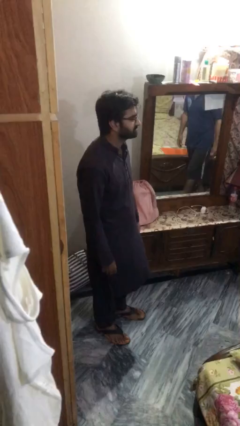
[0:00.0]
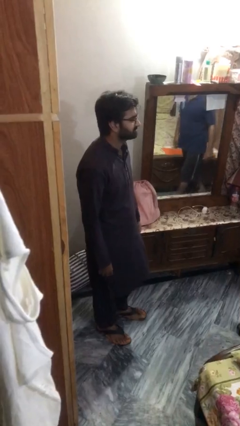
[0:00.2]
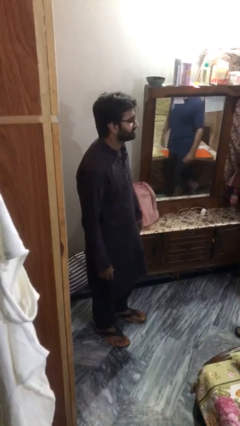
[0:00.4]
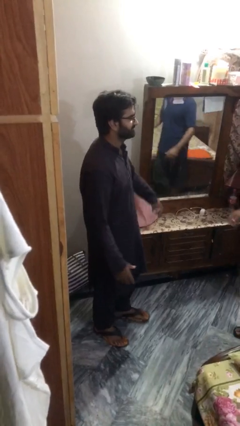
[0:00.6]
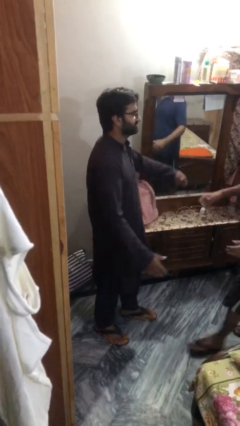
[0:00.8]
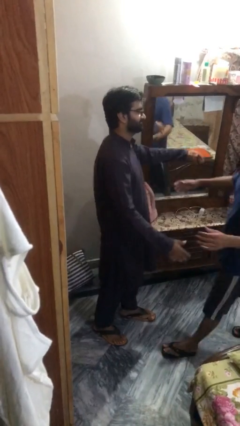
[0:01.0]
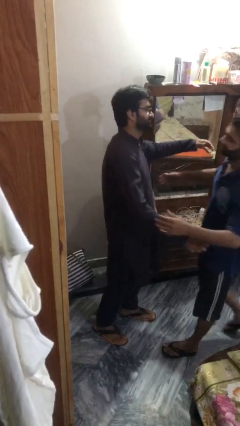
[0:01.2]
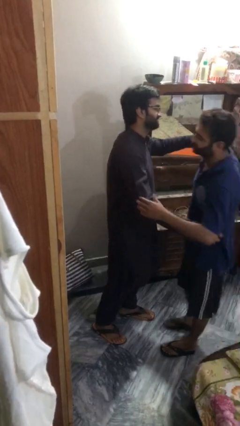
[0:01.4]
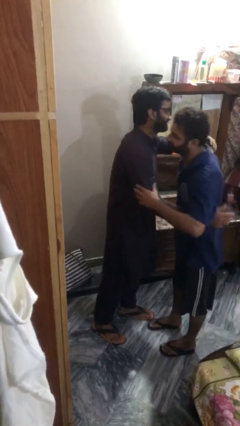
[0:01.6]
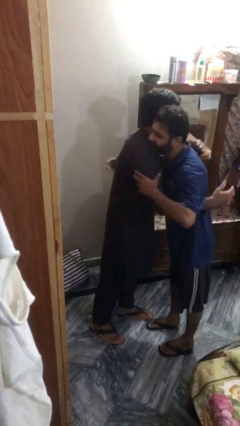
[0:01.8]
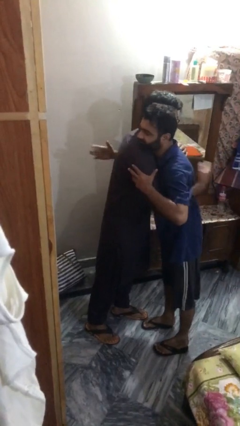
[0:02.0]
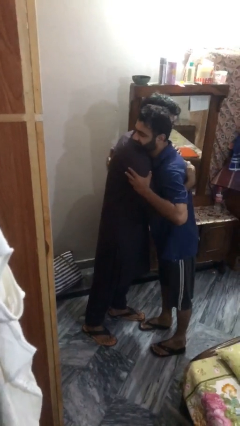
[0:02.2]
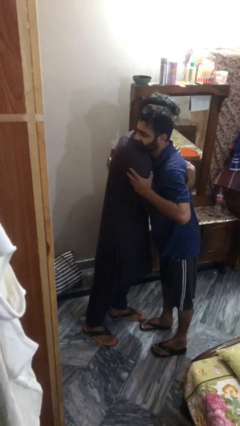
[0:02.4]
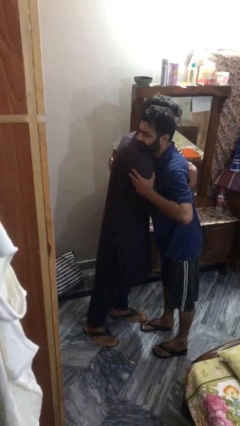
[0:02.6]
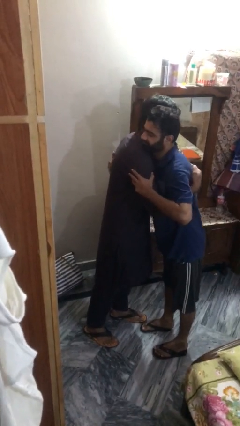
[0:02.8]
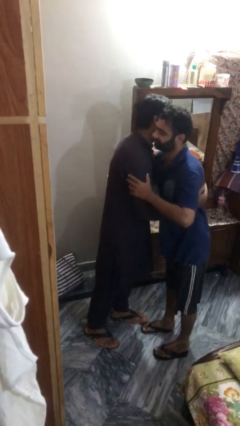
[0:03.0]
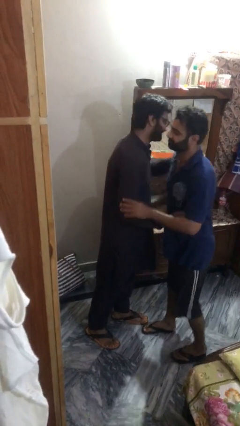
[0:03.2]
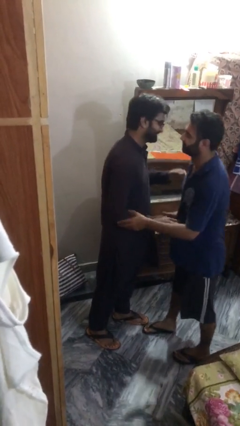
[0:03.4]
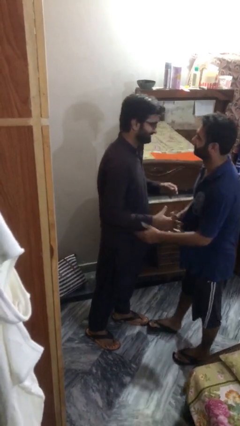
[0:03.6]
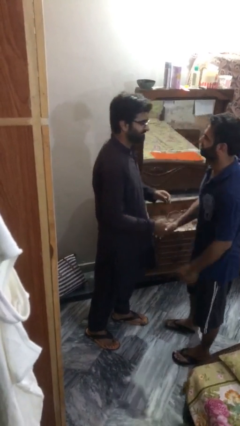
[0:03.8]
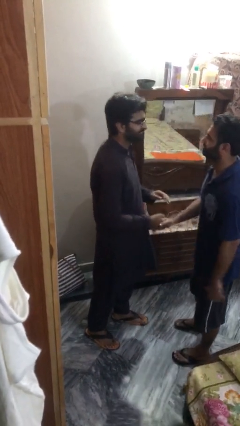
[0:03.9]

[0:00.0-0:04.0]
person embraces person

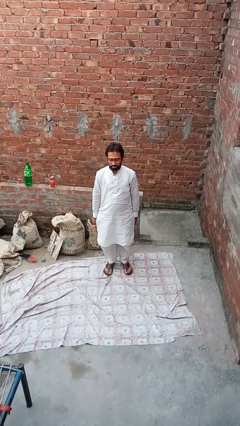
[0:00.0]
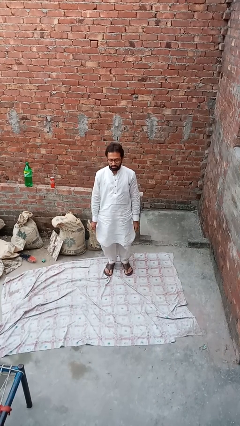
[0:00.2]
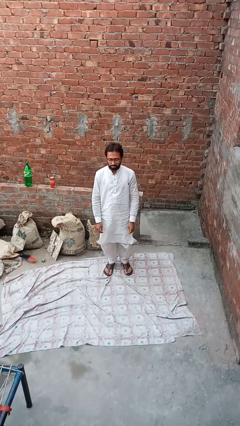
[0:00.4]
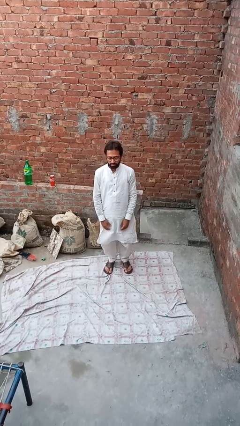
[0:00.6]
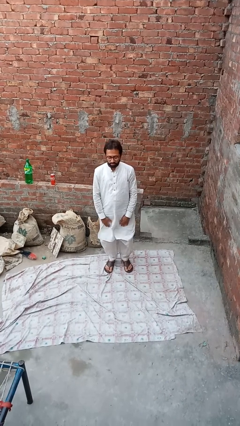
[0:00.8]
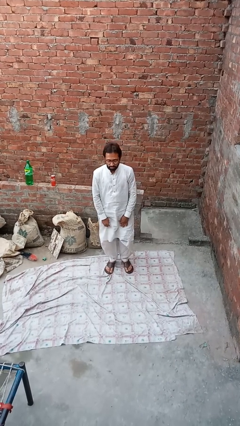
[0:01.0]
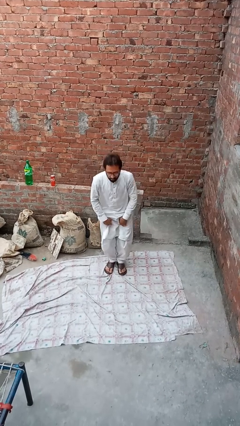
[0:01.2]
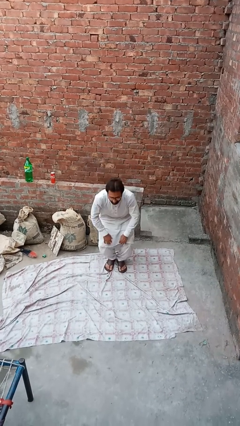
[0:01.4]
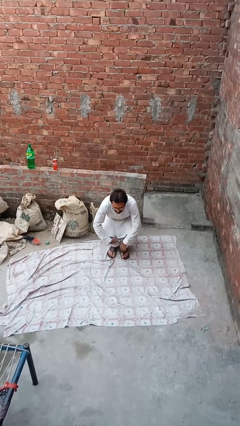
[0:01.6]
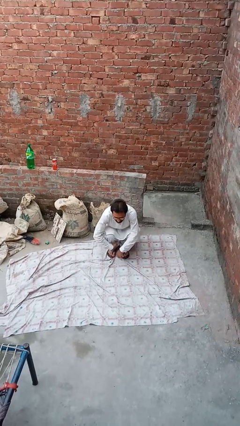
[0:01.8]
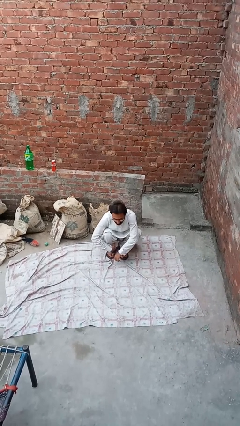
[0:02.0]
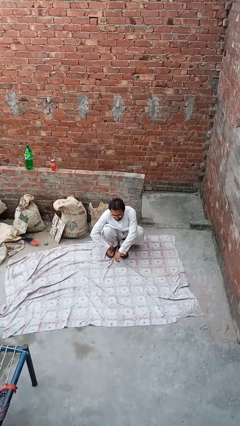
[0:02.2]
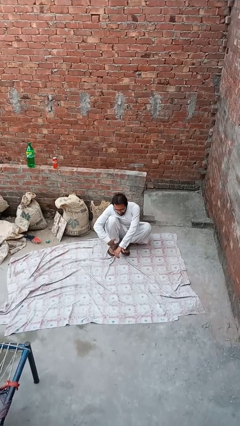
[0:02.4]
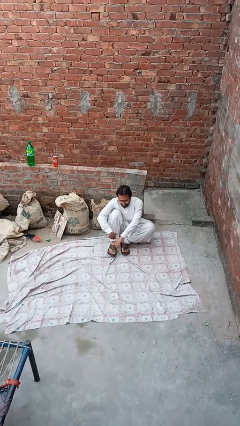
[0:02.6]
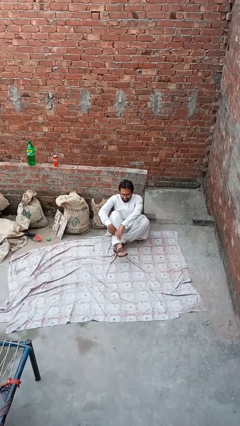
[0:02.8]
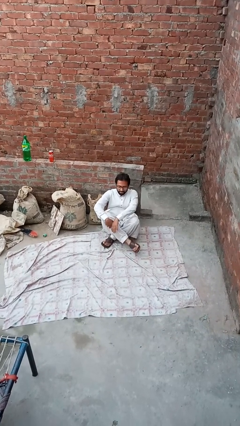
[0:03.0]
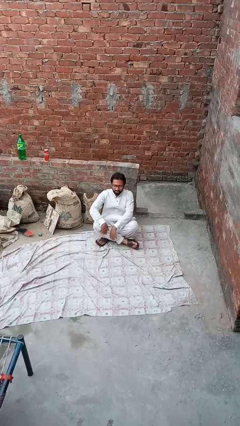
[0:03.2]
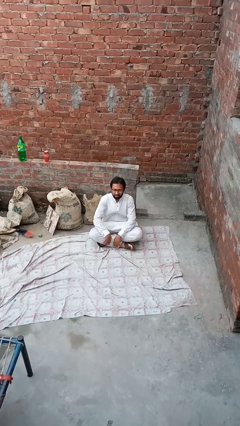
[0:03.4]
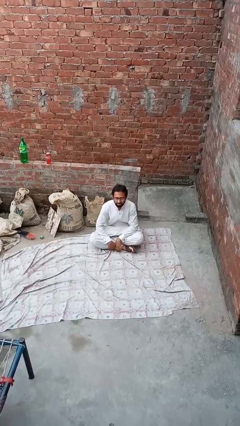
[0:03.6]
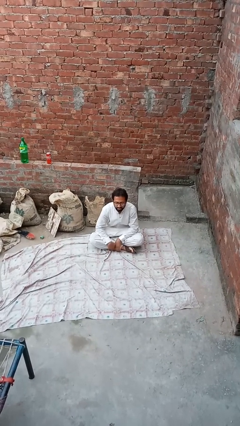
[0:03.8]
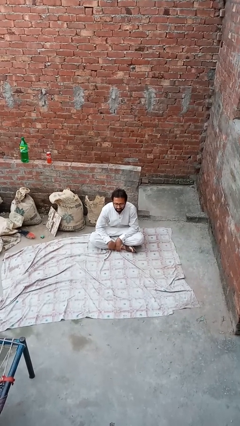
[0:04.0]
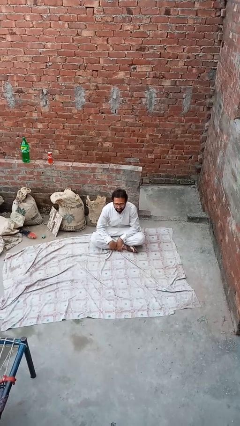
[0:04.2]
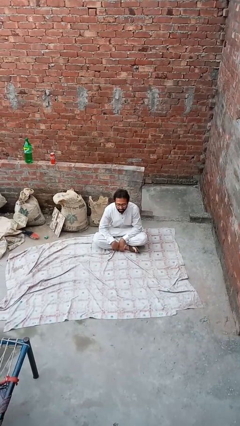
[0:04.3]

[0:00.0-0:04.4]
person sits crisscross

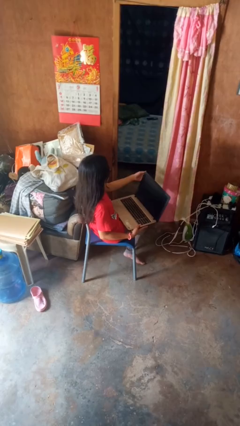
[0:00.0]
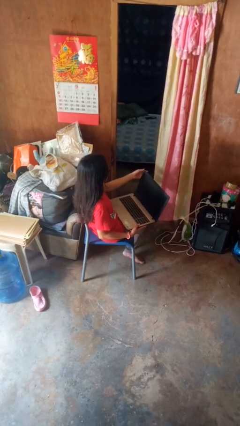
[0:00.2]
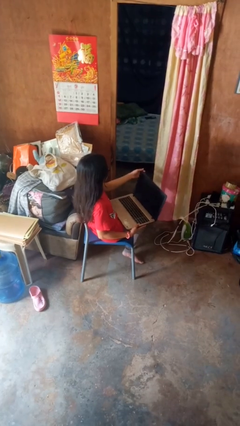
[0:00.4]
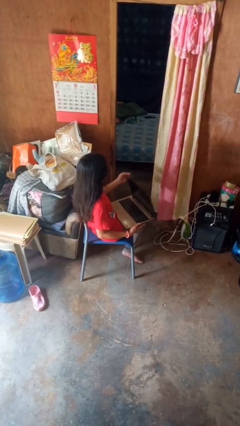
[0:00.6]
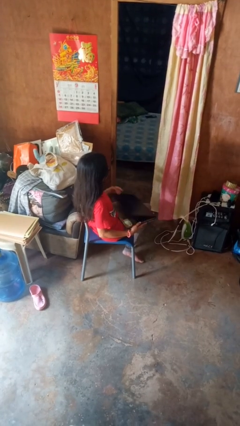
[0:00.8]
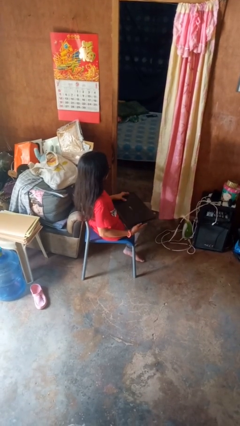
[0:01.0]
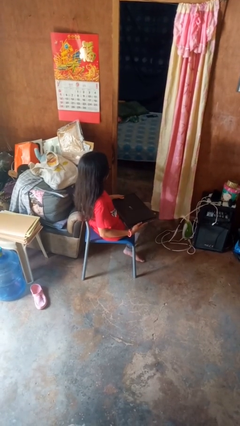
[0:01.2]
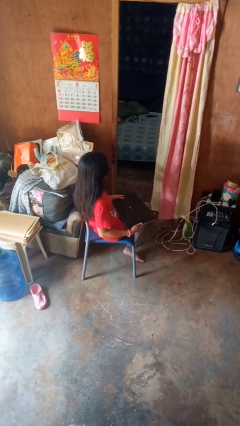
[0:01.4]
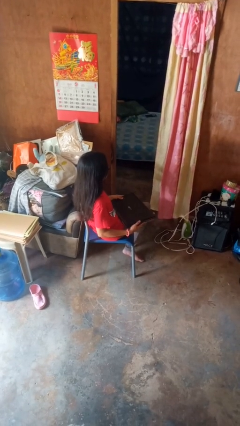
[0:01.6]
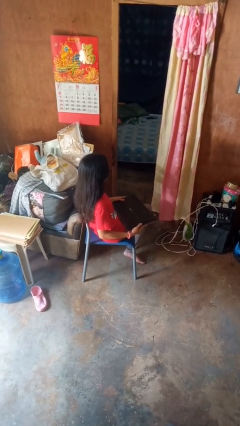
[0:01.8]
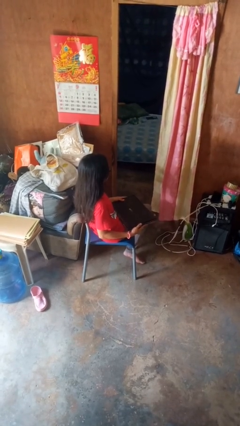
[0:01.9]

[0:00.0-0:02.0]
person closes laptop

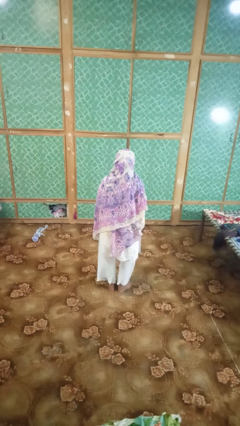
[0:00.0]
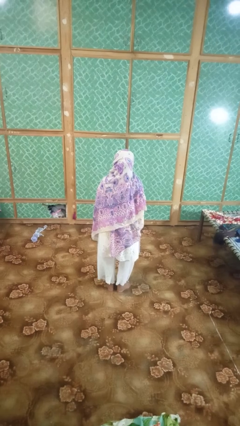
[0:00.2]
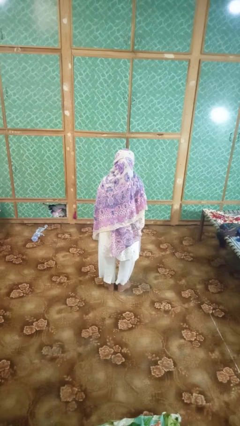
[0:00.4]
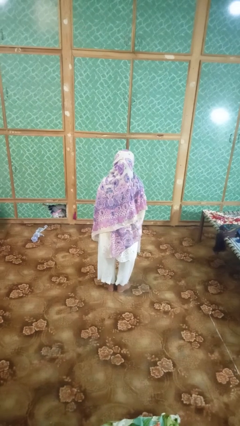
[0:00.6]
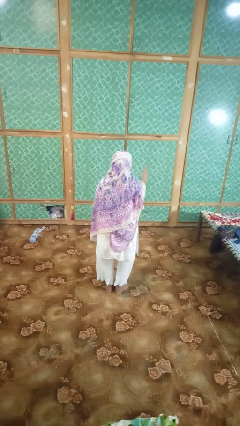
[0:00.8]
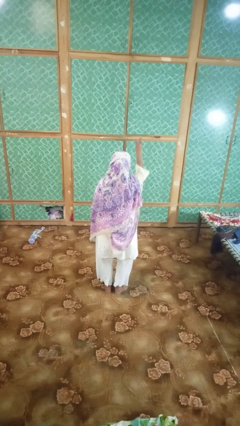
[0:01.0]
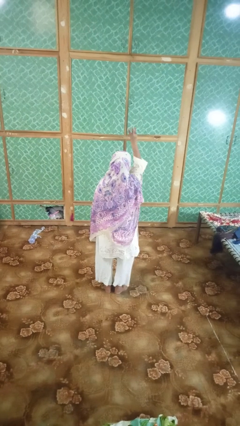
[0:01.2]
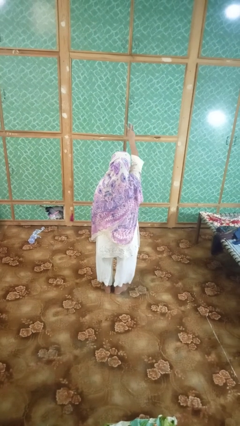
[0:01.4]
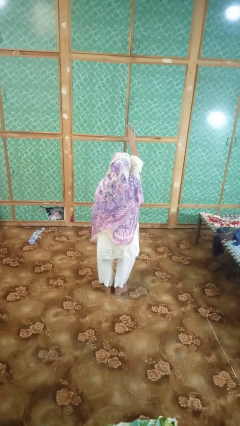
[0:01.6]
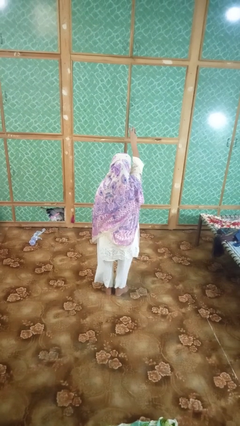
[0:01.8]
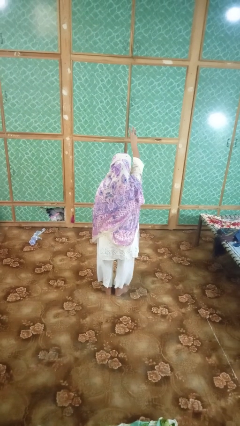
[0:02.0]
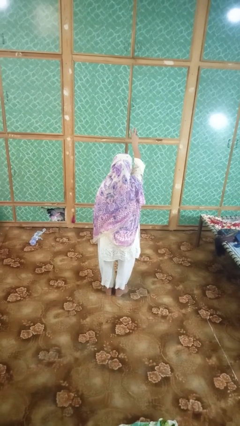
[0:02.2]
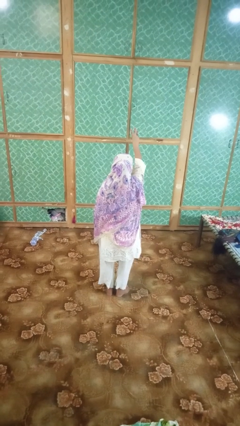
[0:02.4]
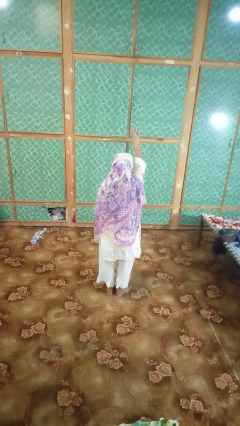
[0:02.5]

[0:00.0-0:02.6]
person gestures number three

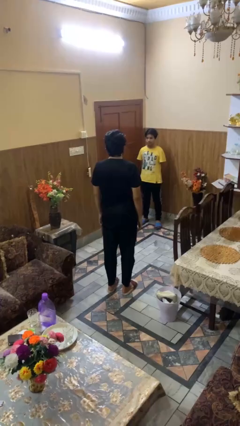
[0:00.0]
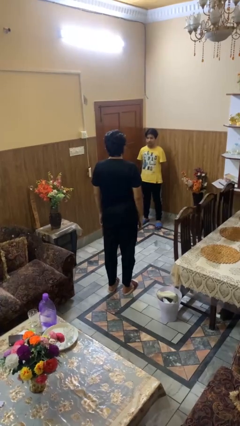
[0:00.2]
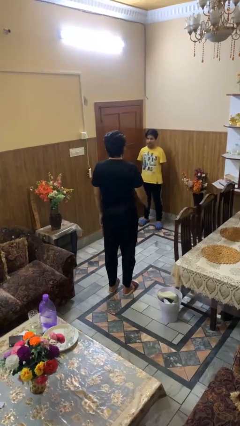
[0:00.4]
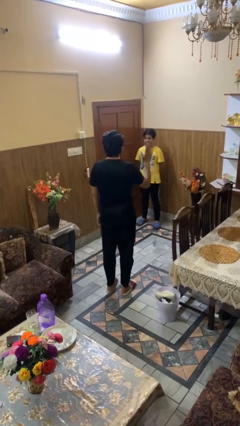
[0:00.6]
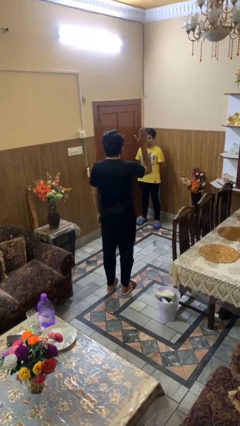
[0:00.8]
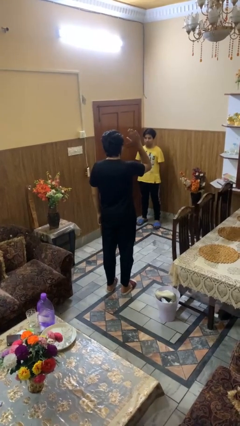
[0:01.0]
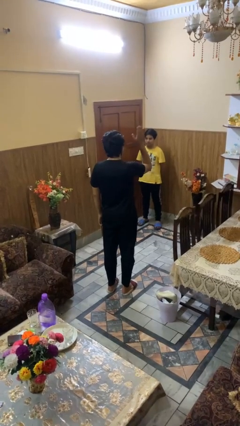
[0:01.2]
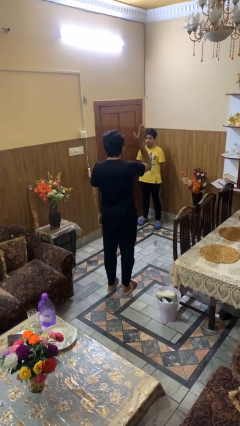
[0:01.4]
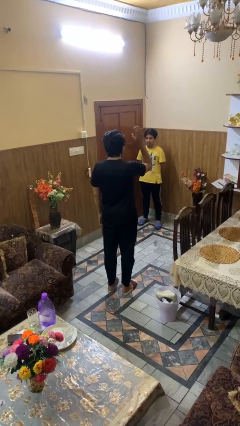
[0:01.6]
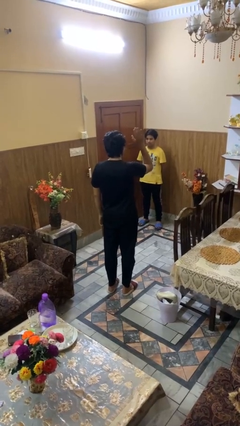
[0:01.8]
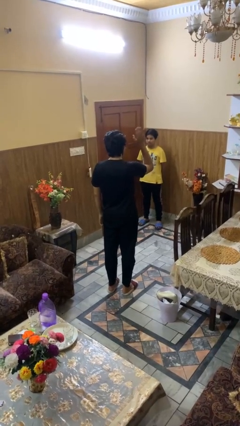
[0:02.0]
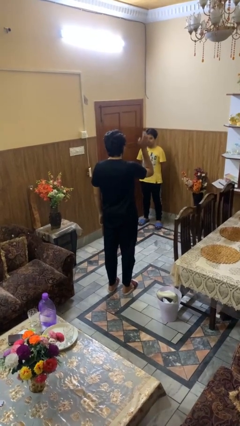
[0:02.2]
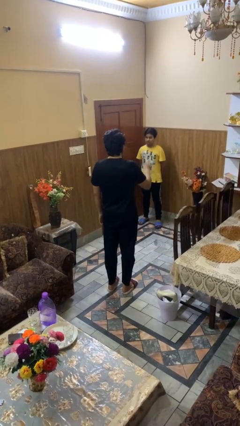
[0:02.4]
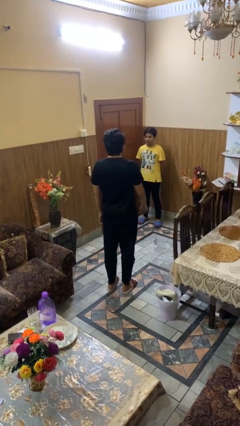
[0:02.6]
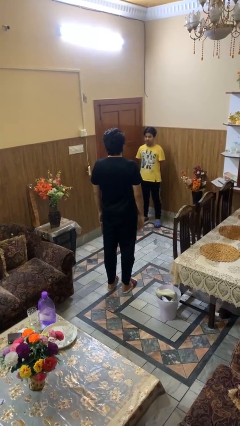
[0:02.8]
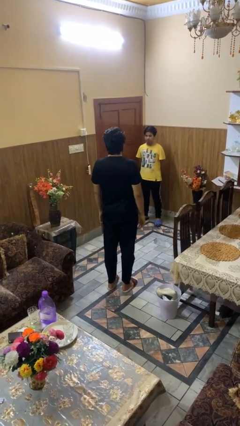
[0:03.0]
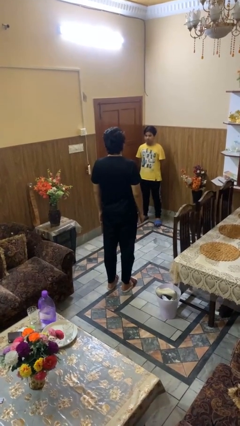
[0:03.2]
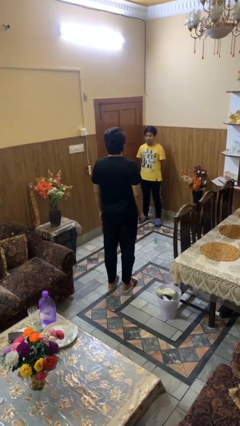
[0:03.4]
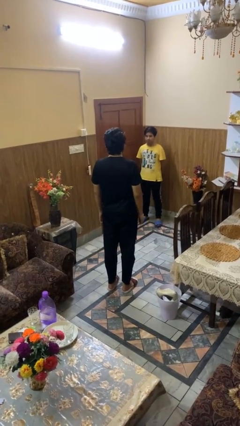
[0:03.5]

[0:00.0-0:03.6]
person waves at person

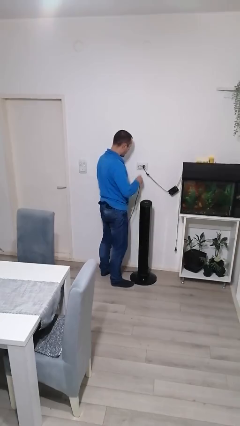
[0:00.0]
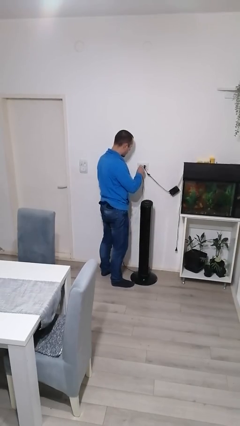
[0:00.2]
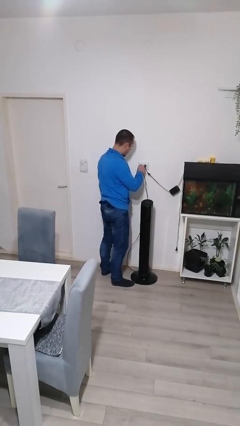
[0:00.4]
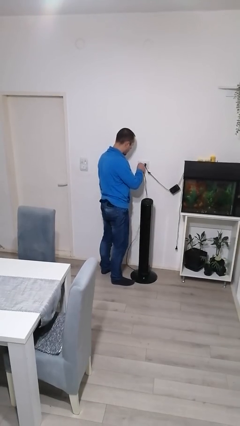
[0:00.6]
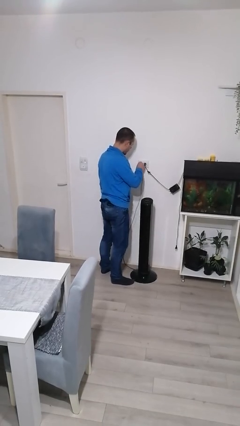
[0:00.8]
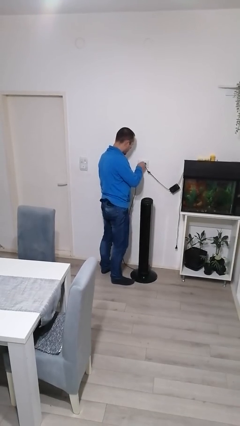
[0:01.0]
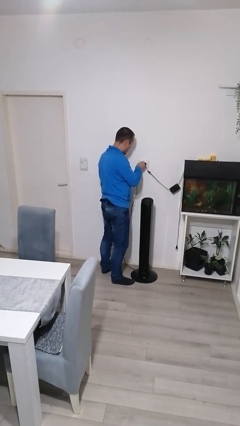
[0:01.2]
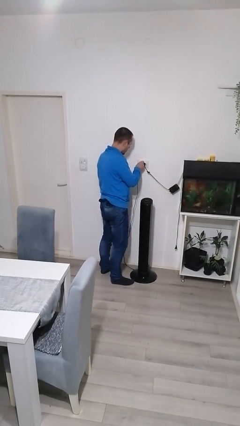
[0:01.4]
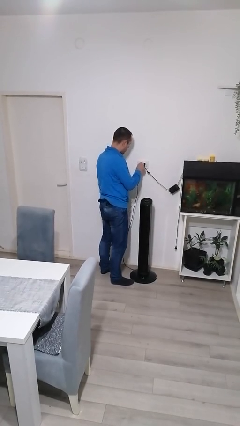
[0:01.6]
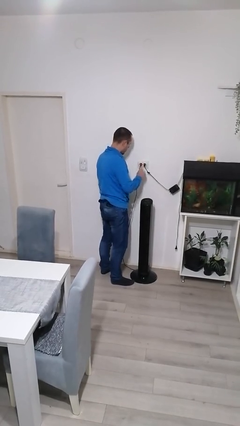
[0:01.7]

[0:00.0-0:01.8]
person plugs into electrical socket
